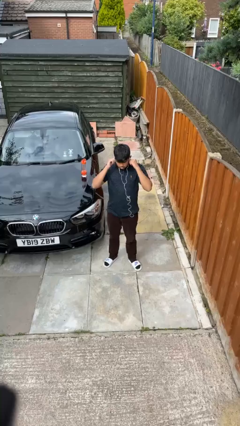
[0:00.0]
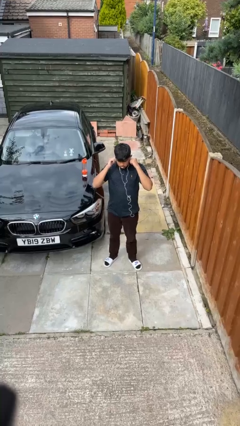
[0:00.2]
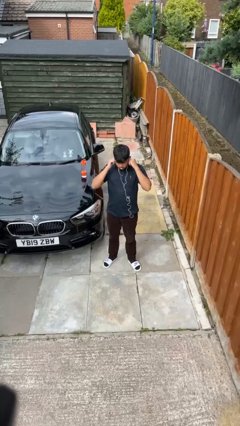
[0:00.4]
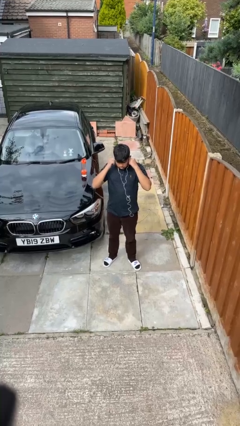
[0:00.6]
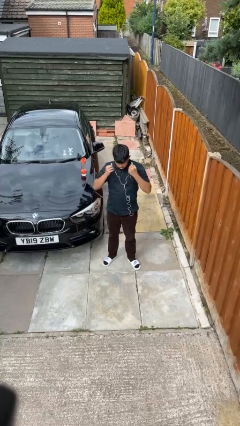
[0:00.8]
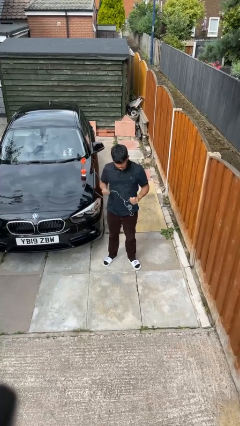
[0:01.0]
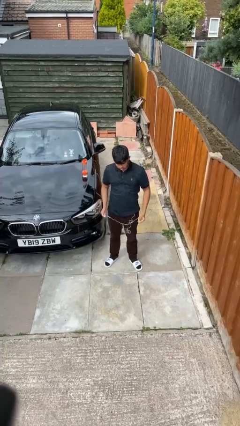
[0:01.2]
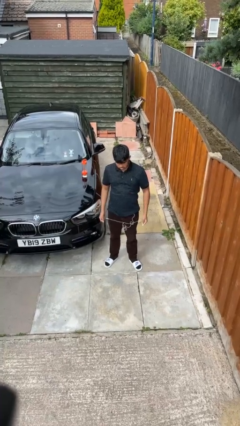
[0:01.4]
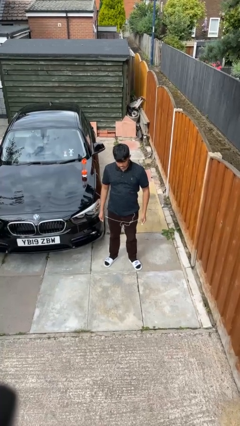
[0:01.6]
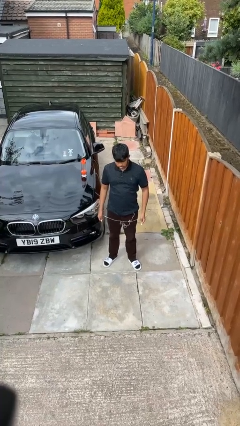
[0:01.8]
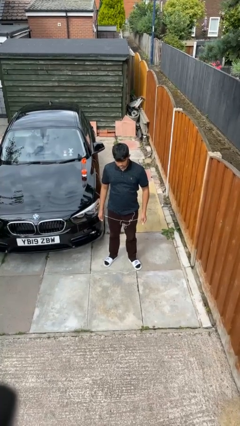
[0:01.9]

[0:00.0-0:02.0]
person takes off headphones

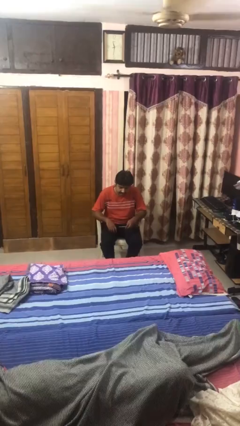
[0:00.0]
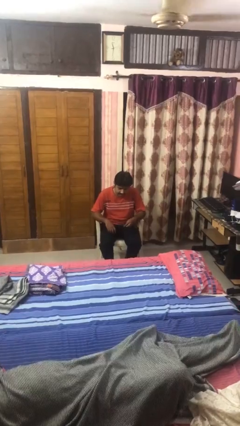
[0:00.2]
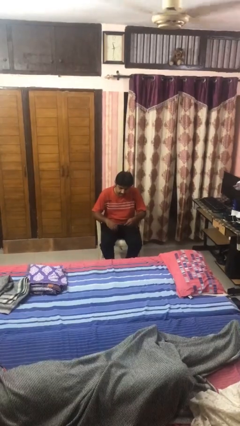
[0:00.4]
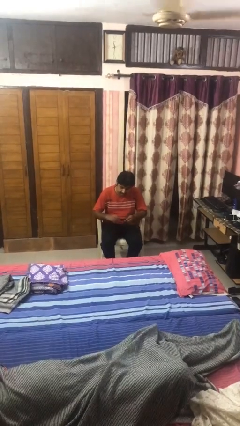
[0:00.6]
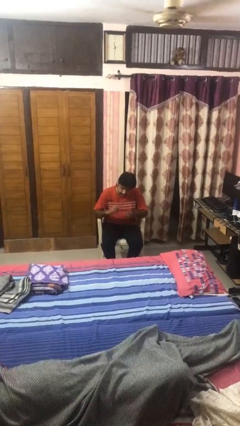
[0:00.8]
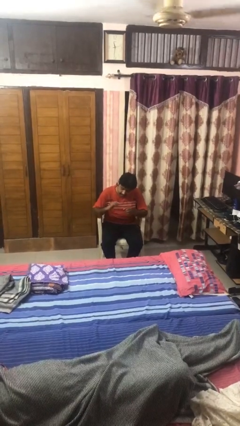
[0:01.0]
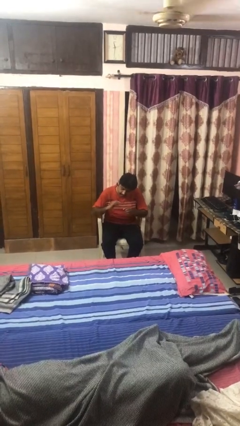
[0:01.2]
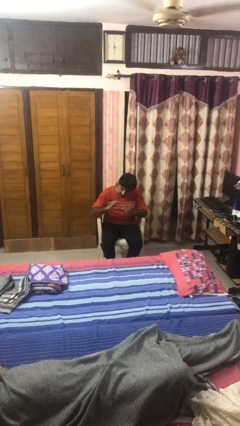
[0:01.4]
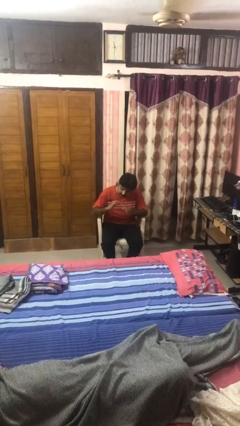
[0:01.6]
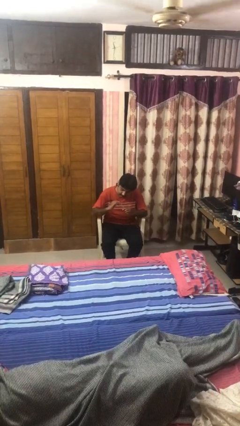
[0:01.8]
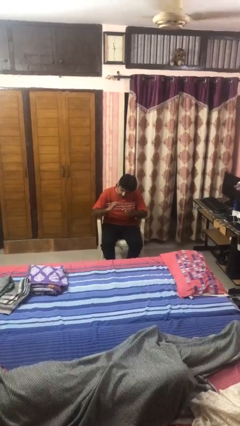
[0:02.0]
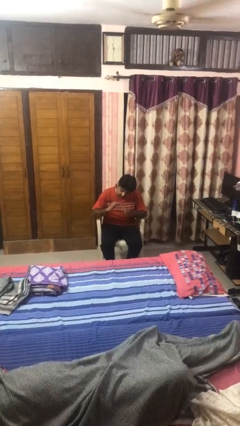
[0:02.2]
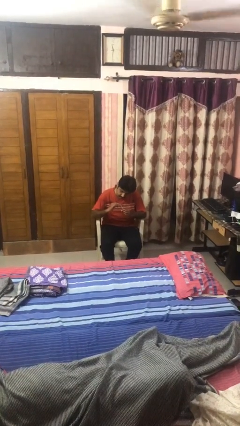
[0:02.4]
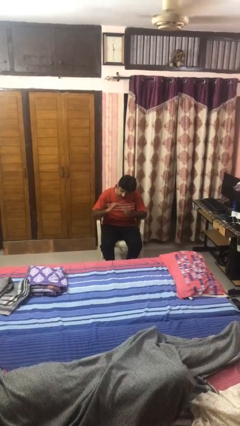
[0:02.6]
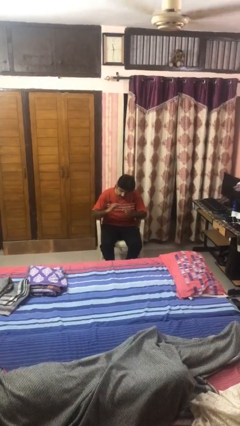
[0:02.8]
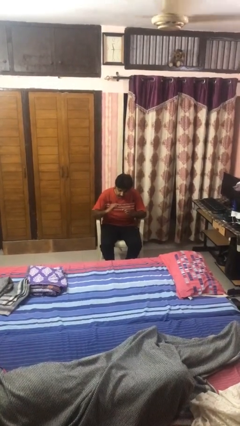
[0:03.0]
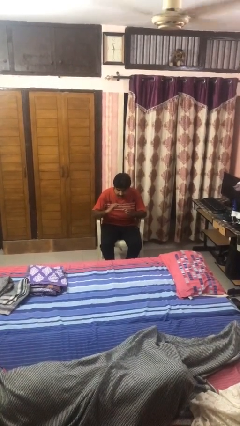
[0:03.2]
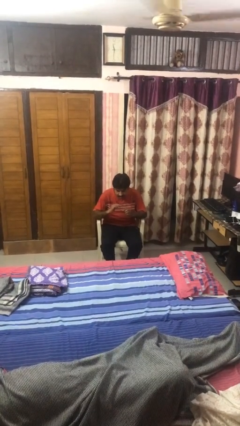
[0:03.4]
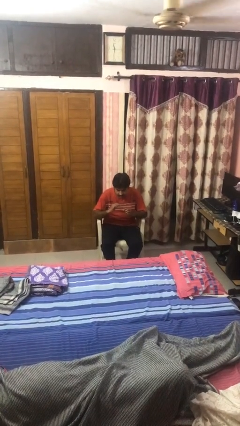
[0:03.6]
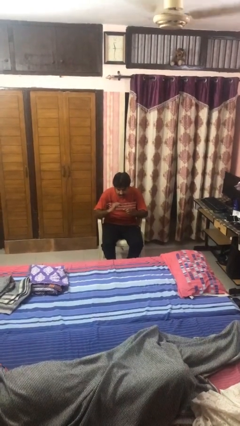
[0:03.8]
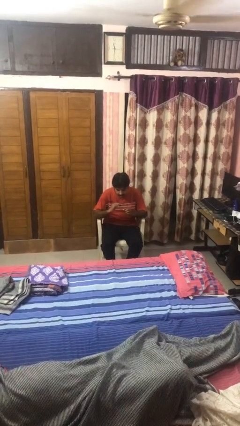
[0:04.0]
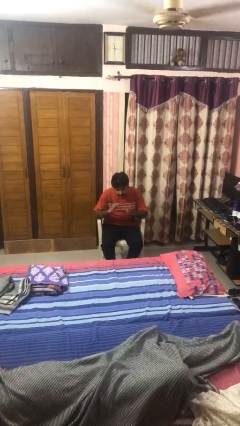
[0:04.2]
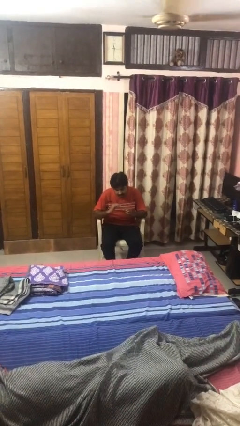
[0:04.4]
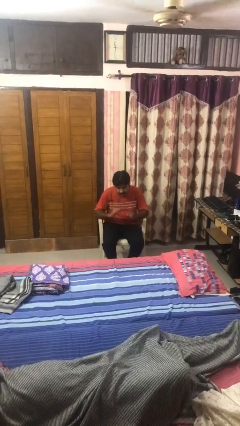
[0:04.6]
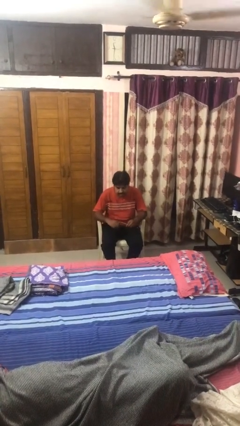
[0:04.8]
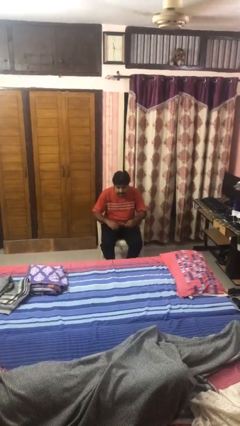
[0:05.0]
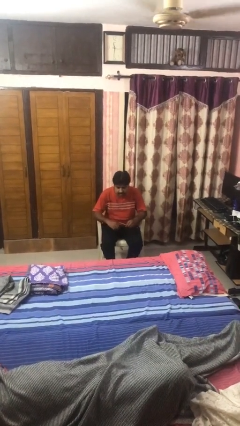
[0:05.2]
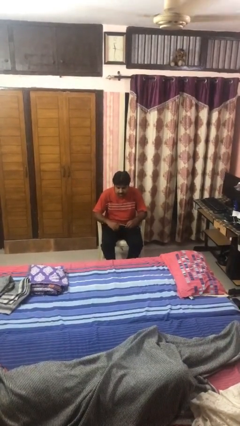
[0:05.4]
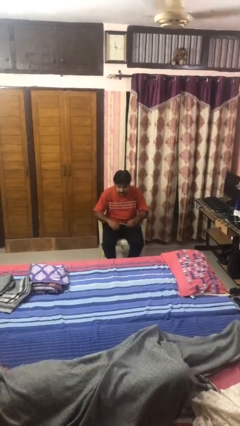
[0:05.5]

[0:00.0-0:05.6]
person files fingernails

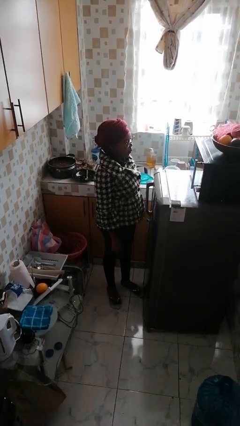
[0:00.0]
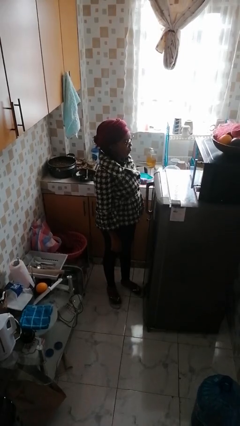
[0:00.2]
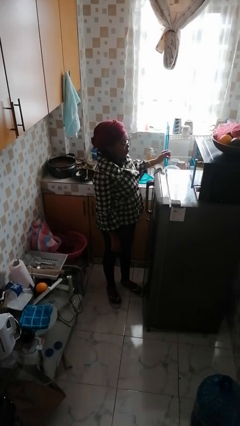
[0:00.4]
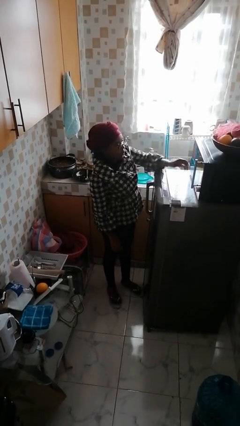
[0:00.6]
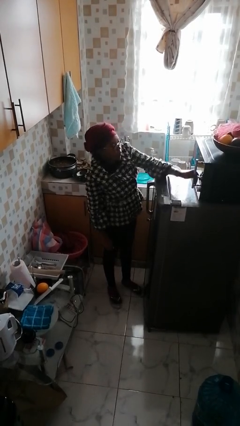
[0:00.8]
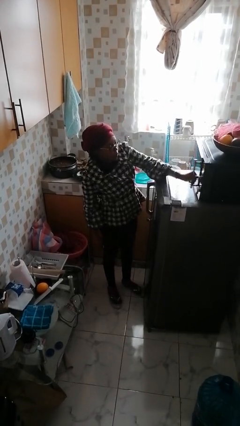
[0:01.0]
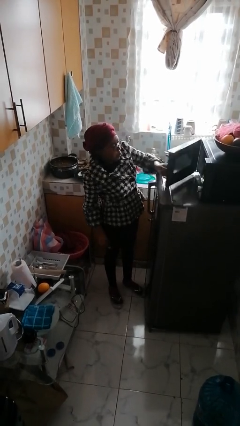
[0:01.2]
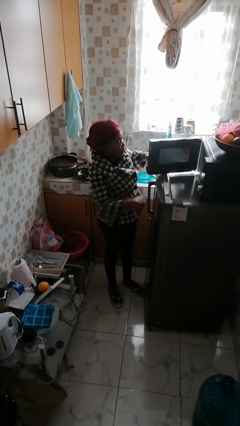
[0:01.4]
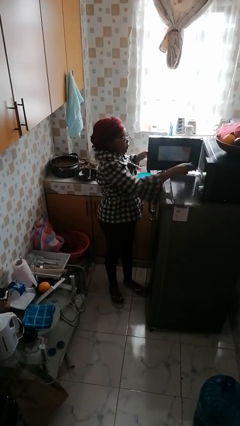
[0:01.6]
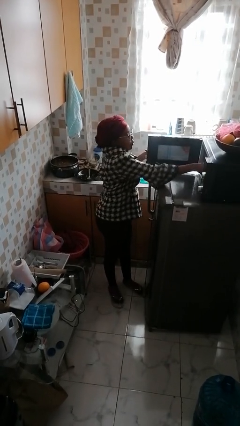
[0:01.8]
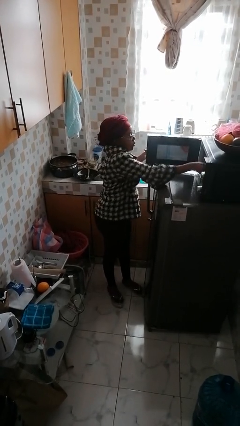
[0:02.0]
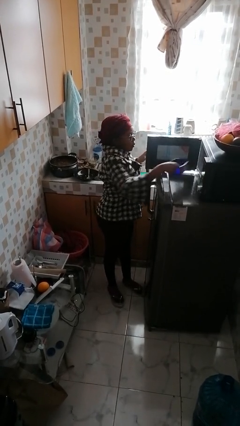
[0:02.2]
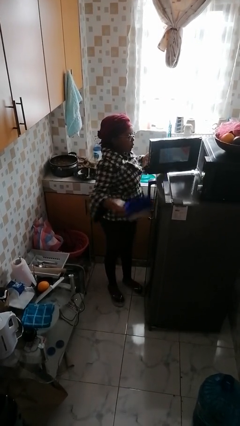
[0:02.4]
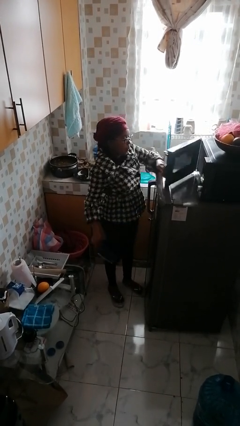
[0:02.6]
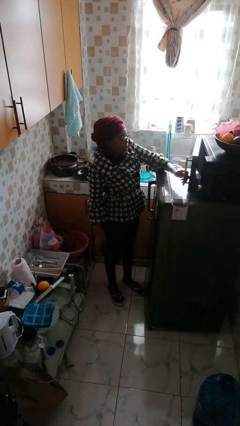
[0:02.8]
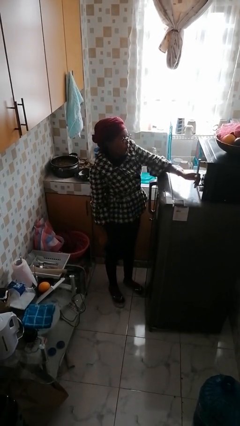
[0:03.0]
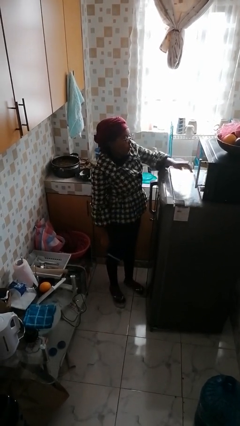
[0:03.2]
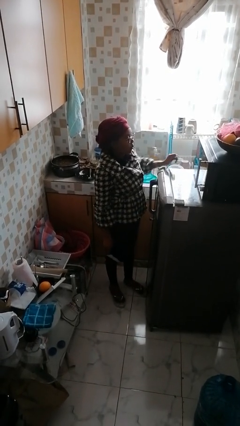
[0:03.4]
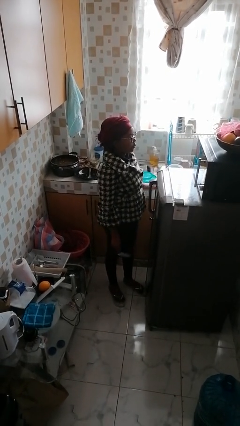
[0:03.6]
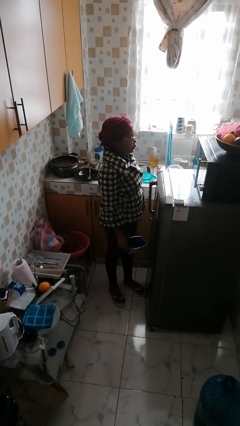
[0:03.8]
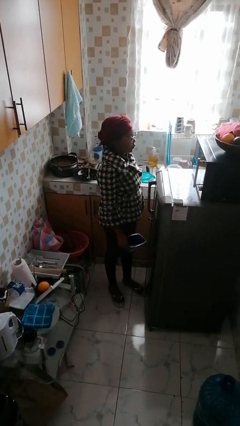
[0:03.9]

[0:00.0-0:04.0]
person takes object from microwave

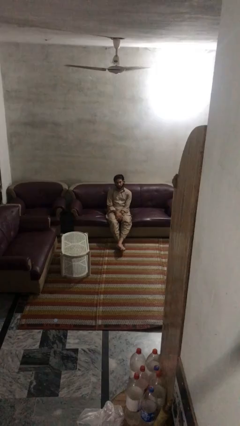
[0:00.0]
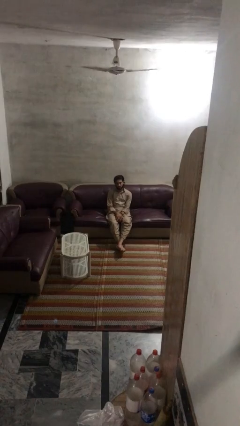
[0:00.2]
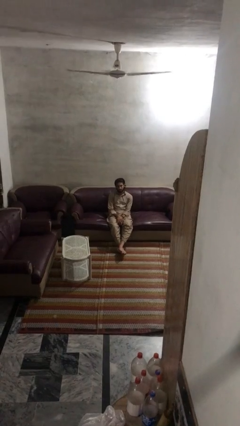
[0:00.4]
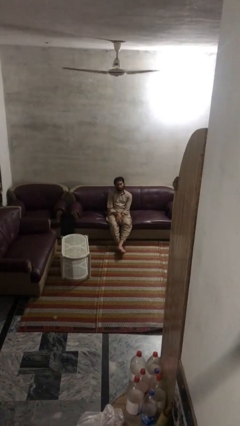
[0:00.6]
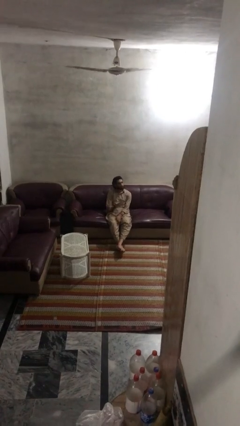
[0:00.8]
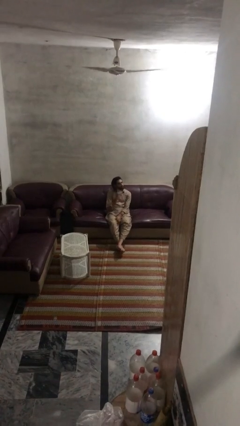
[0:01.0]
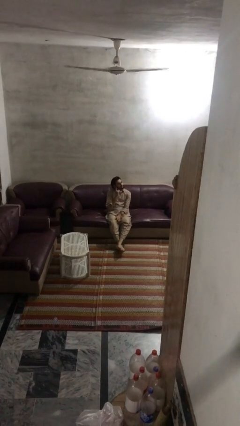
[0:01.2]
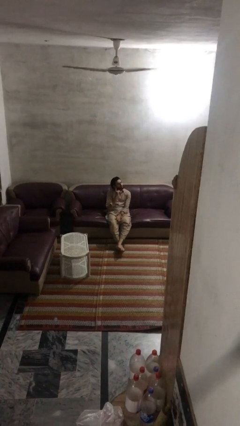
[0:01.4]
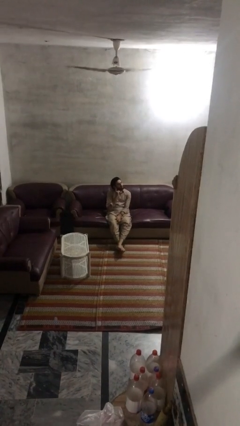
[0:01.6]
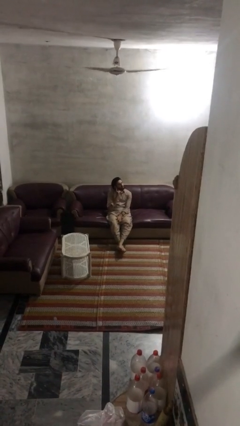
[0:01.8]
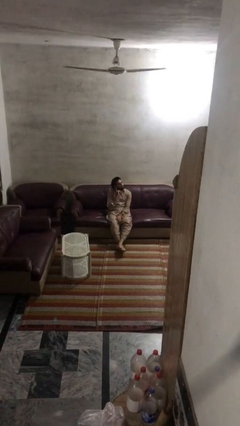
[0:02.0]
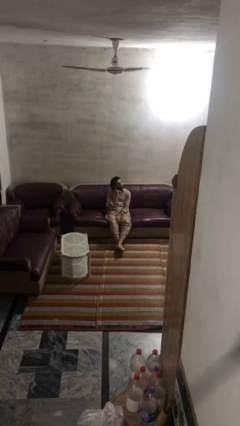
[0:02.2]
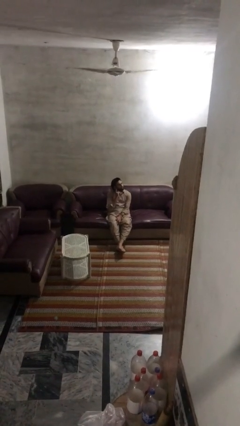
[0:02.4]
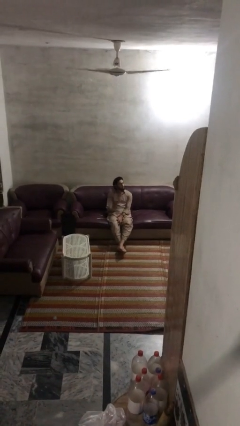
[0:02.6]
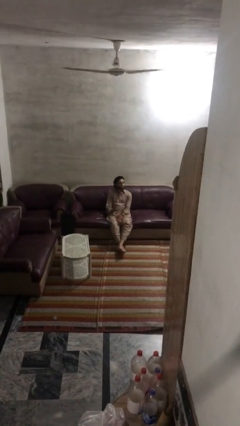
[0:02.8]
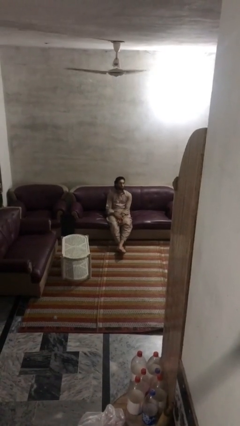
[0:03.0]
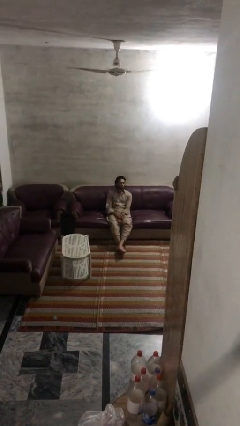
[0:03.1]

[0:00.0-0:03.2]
person gestures listen closely

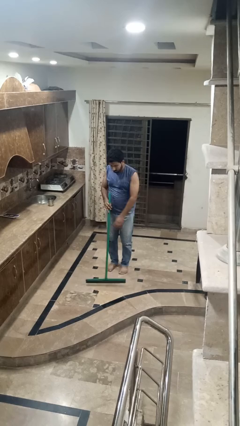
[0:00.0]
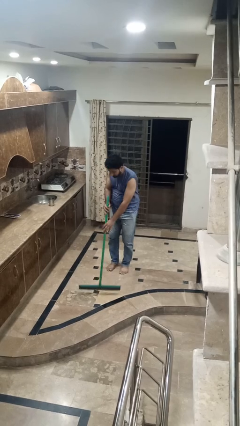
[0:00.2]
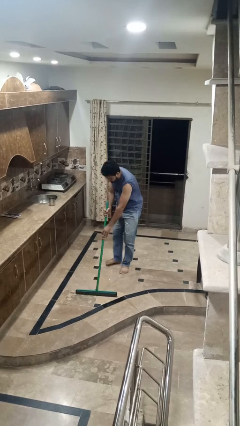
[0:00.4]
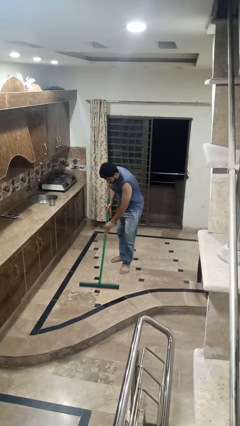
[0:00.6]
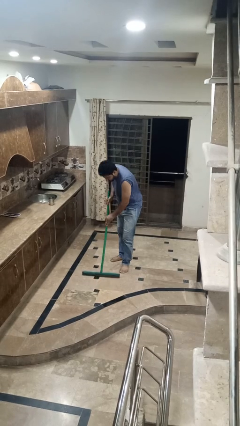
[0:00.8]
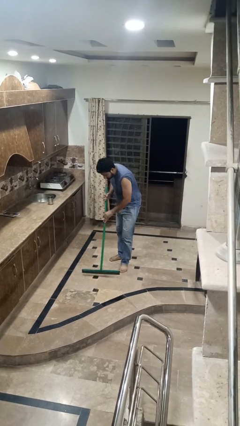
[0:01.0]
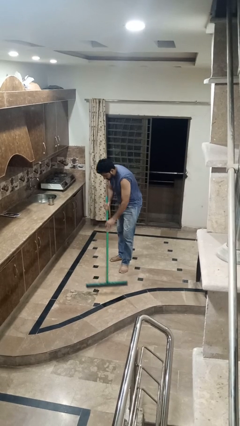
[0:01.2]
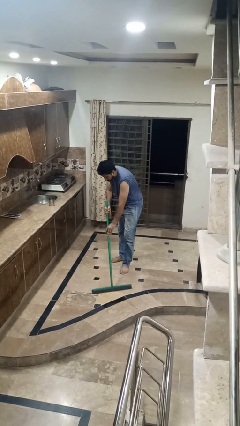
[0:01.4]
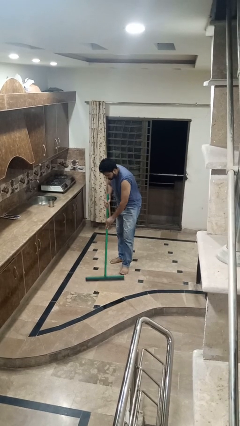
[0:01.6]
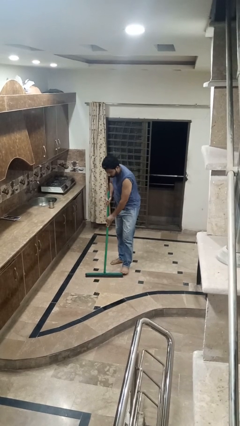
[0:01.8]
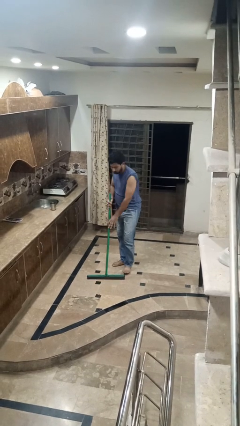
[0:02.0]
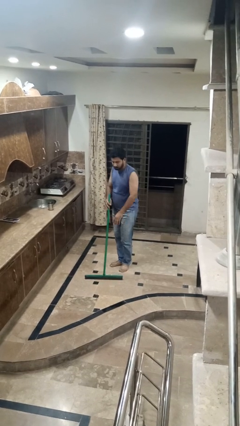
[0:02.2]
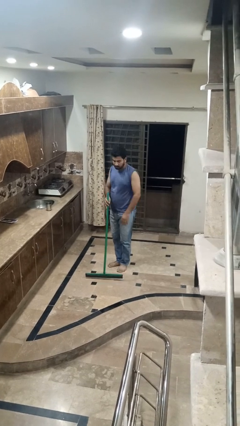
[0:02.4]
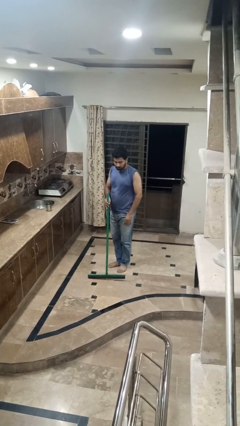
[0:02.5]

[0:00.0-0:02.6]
person mops

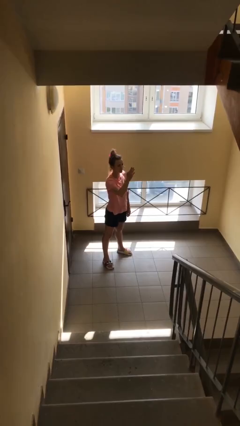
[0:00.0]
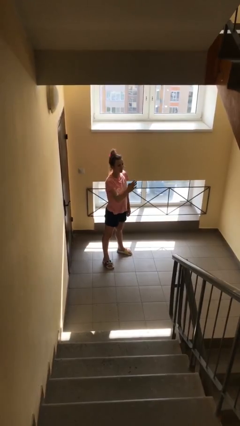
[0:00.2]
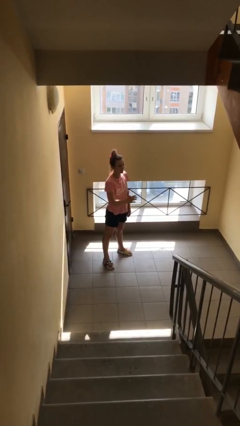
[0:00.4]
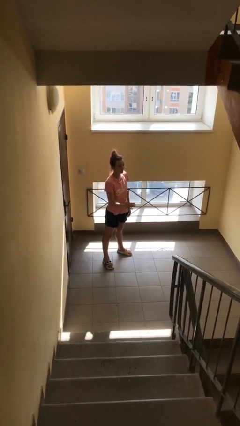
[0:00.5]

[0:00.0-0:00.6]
person gestures lower hand
